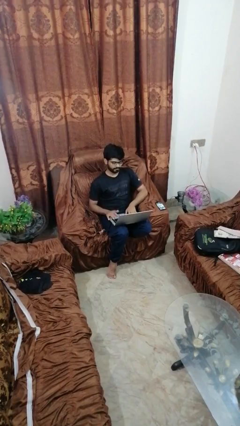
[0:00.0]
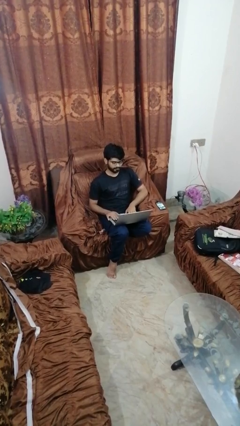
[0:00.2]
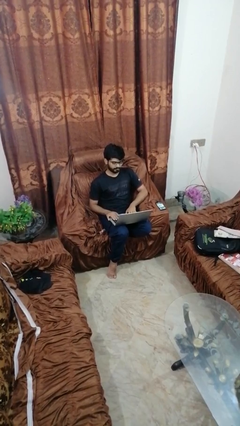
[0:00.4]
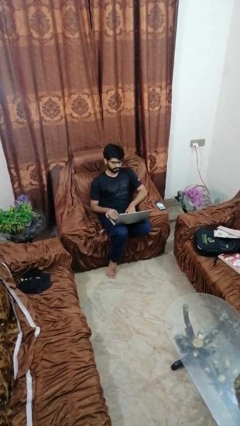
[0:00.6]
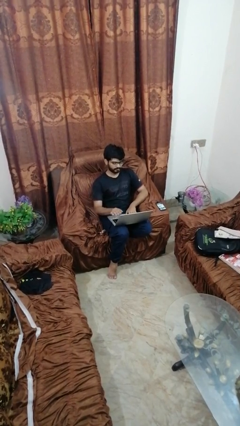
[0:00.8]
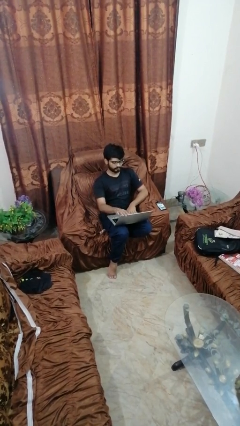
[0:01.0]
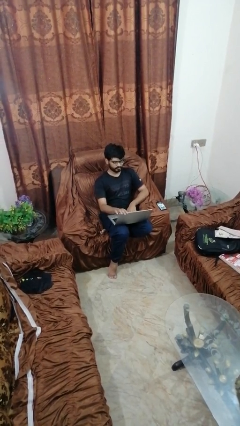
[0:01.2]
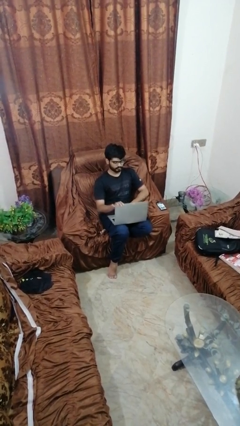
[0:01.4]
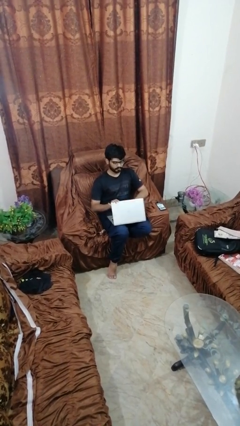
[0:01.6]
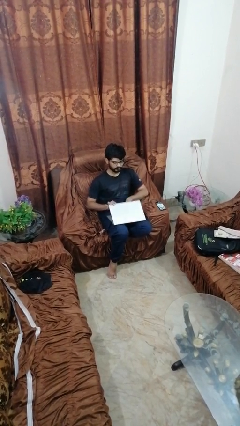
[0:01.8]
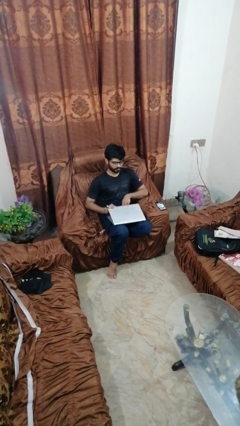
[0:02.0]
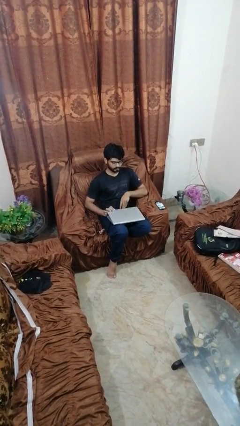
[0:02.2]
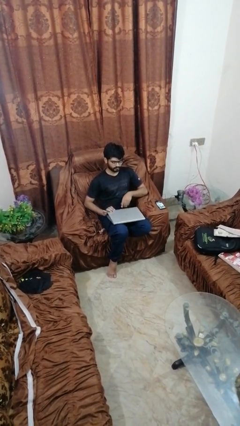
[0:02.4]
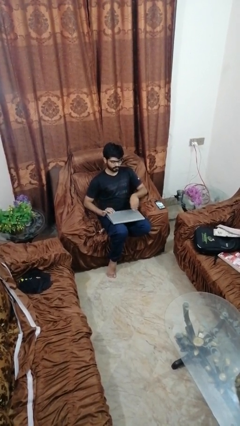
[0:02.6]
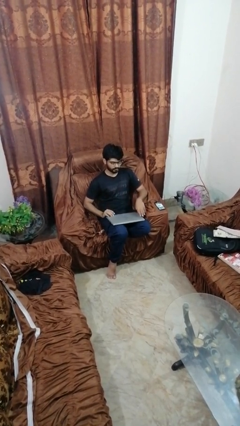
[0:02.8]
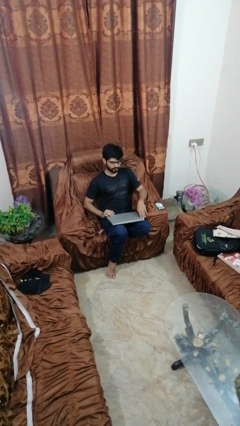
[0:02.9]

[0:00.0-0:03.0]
person closes laptop

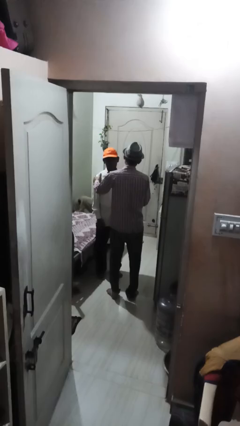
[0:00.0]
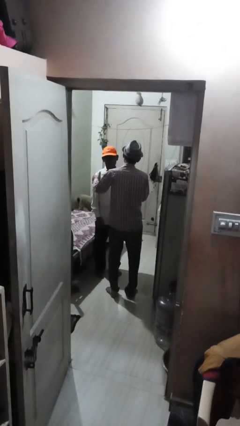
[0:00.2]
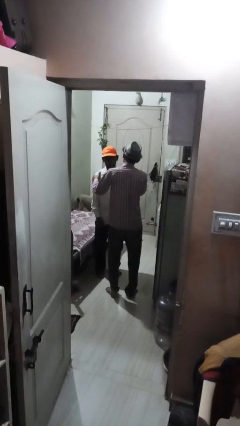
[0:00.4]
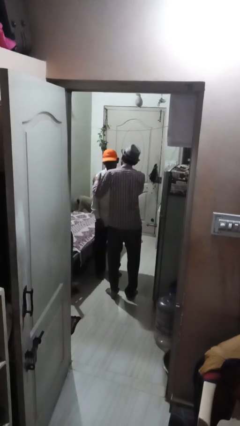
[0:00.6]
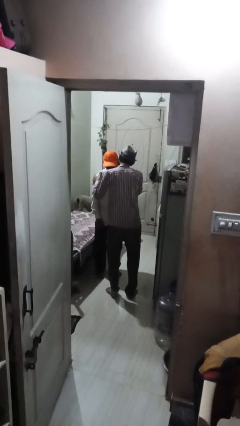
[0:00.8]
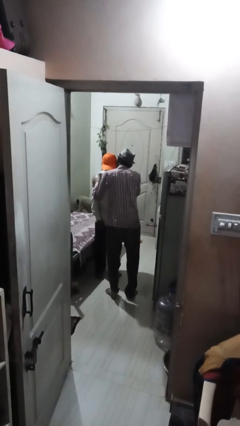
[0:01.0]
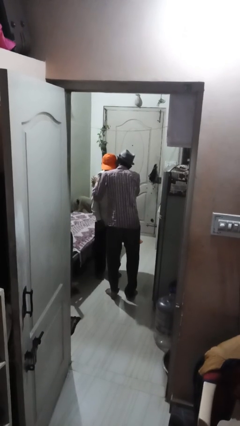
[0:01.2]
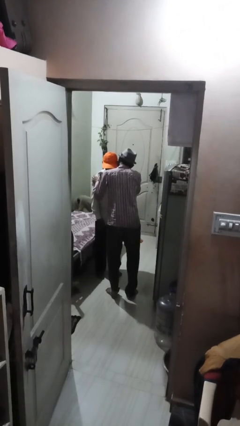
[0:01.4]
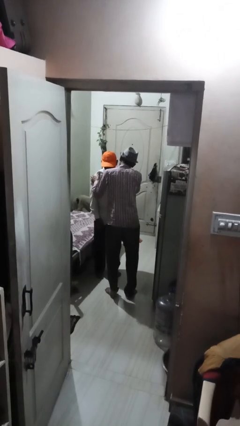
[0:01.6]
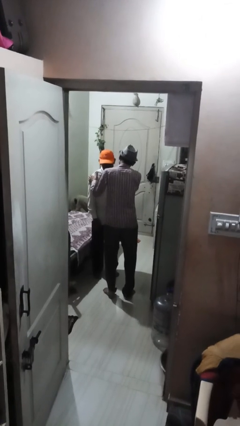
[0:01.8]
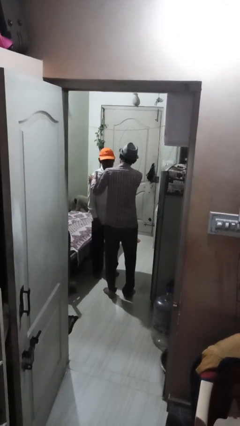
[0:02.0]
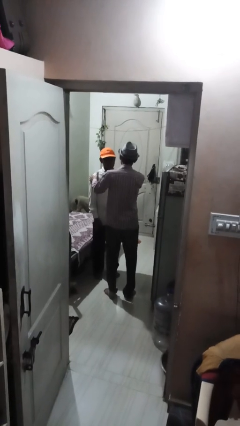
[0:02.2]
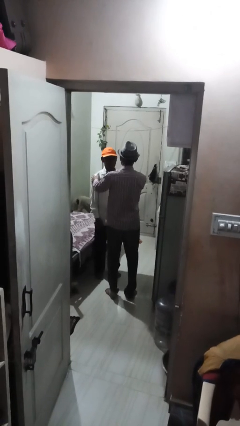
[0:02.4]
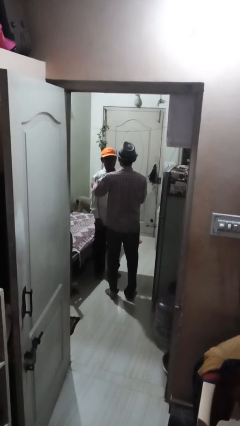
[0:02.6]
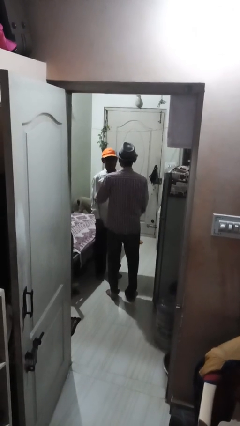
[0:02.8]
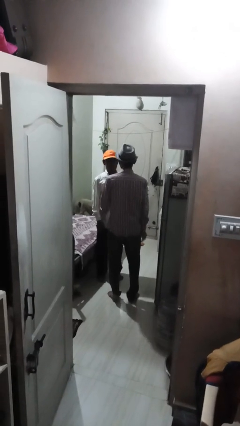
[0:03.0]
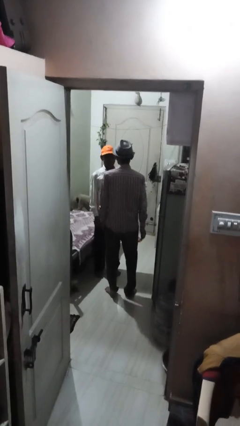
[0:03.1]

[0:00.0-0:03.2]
person kisses cheek of person

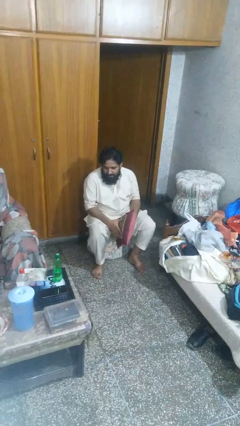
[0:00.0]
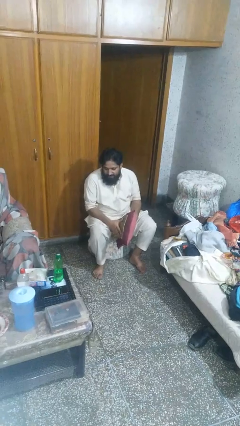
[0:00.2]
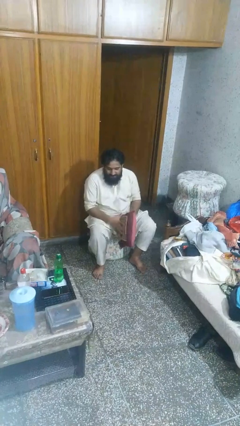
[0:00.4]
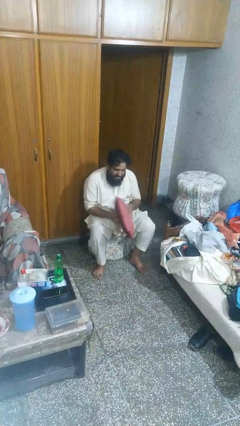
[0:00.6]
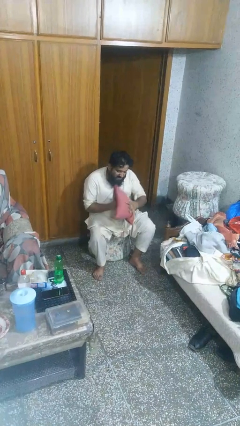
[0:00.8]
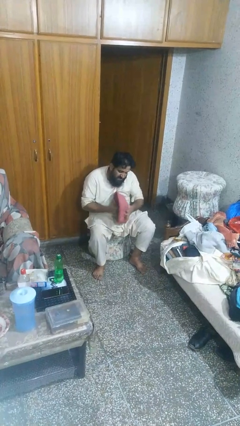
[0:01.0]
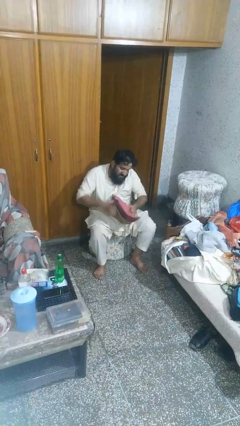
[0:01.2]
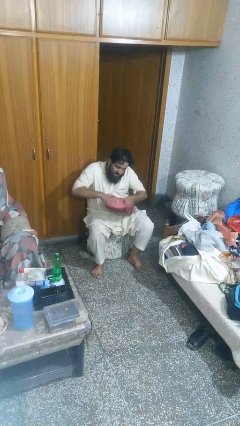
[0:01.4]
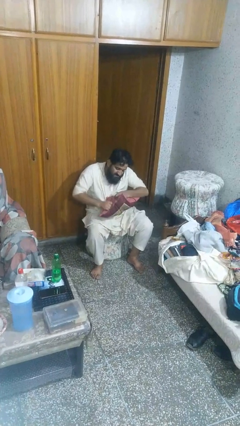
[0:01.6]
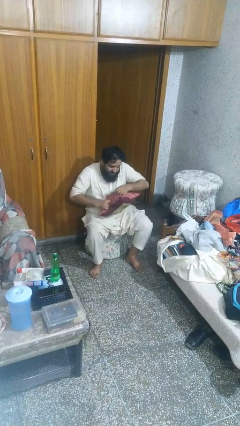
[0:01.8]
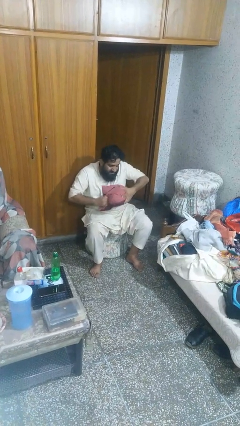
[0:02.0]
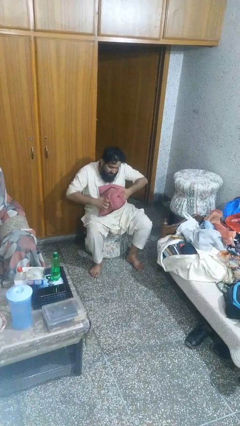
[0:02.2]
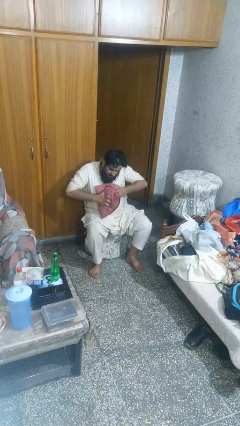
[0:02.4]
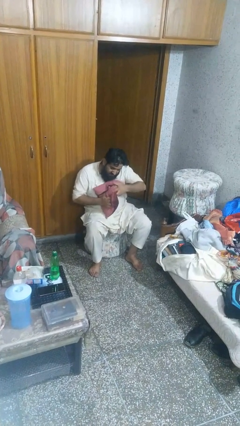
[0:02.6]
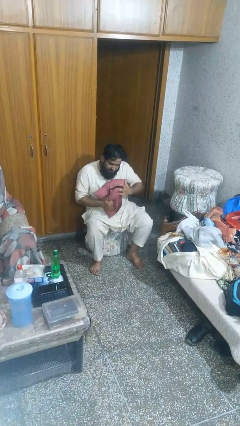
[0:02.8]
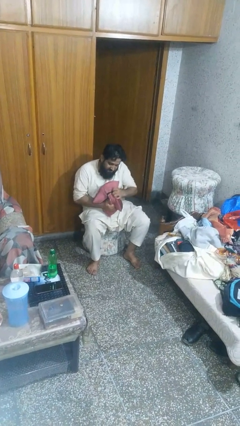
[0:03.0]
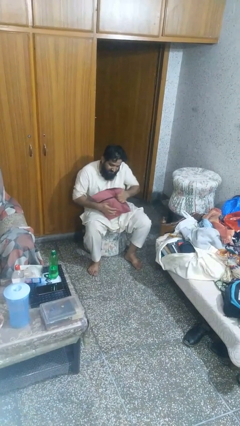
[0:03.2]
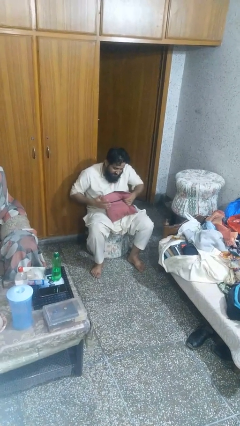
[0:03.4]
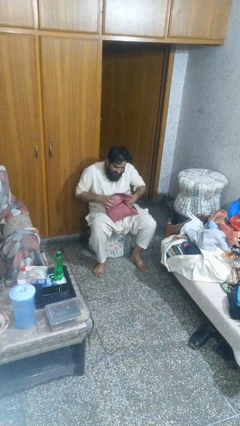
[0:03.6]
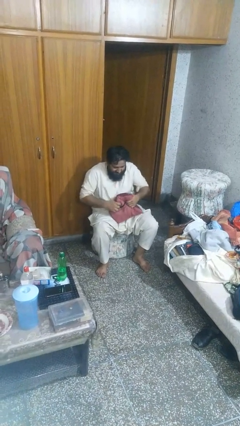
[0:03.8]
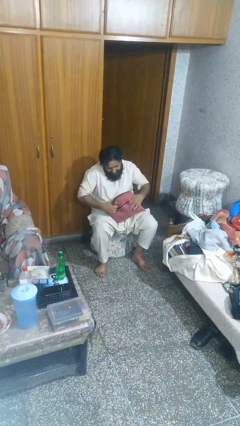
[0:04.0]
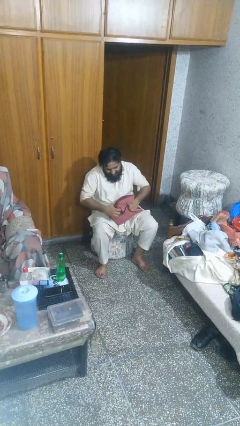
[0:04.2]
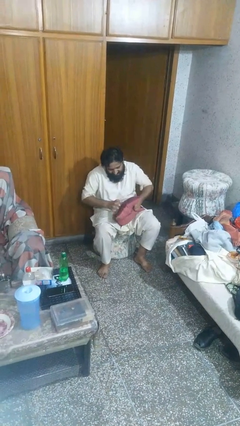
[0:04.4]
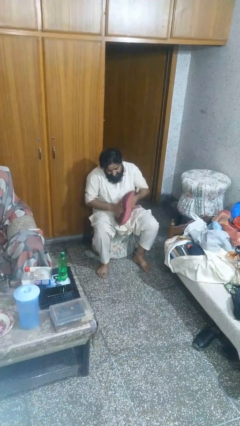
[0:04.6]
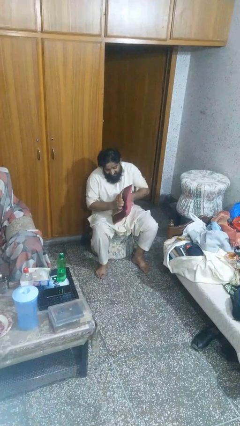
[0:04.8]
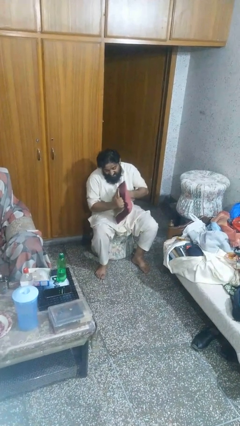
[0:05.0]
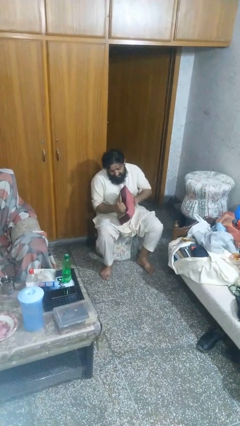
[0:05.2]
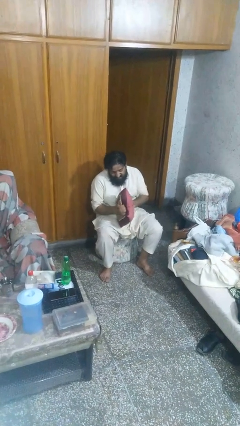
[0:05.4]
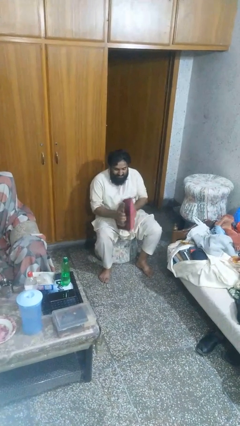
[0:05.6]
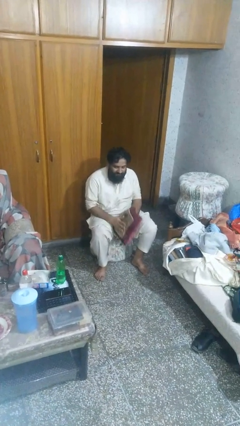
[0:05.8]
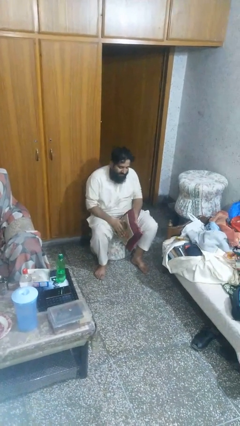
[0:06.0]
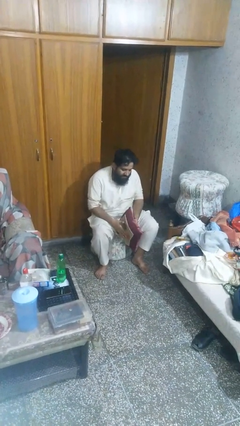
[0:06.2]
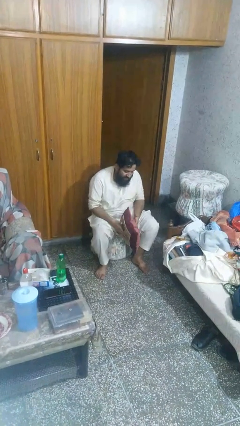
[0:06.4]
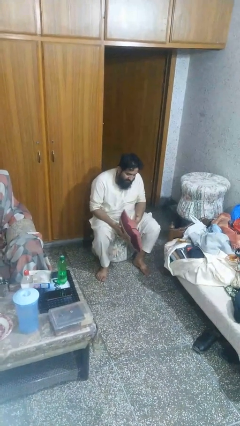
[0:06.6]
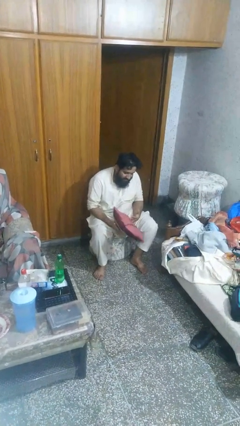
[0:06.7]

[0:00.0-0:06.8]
person squeezes object

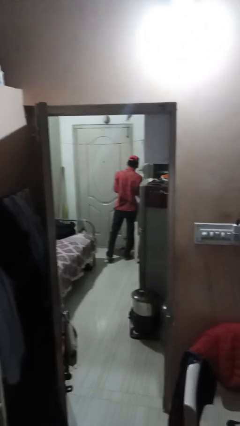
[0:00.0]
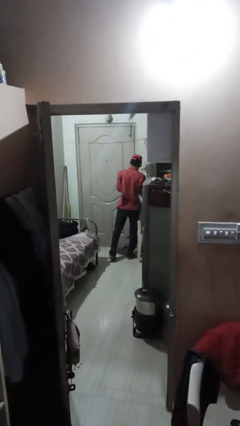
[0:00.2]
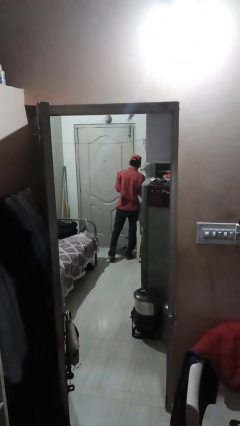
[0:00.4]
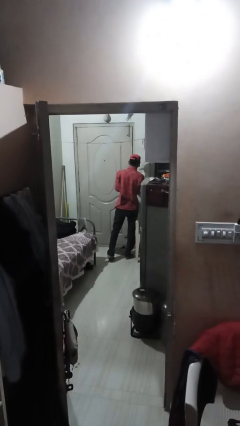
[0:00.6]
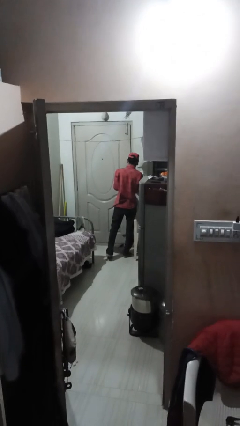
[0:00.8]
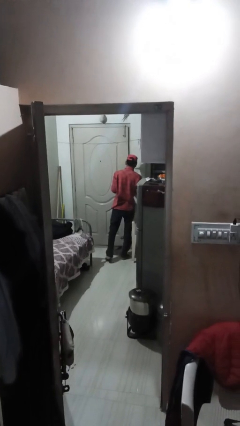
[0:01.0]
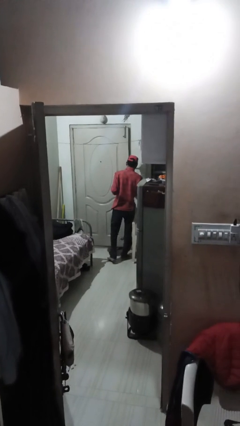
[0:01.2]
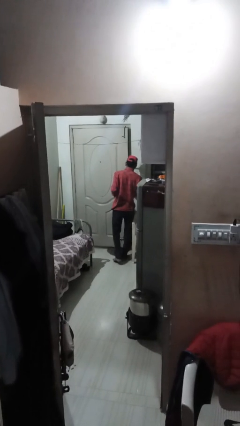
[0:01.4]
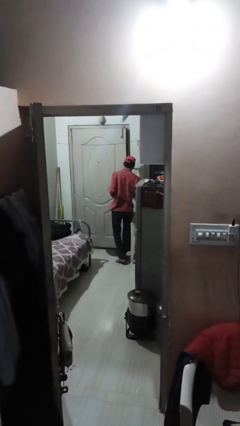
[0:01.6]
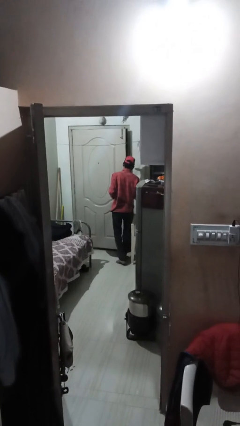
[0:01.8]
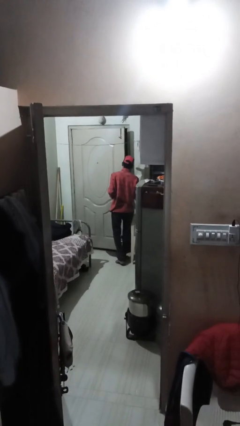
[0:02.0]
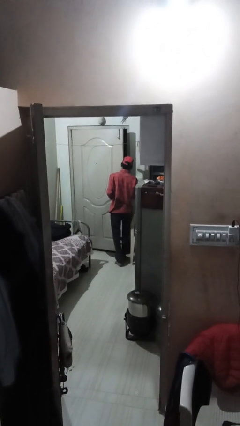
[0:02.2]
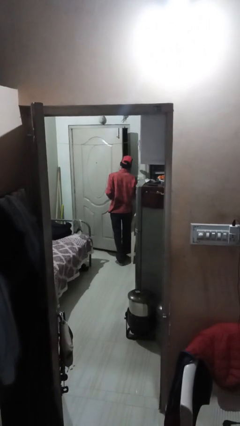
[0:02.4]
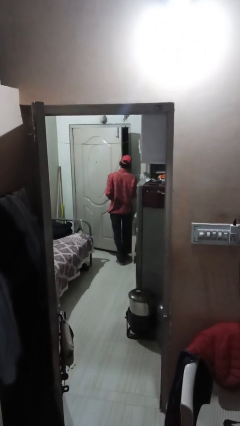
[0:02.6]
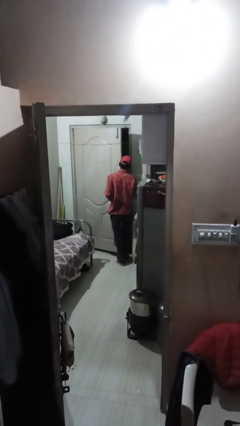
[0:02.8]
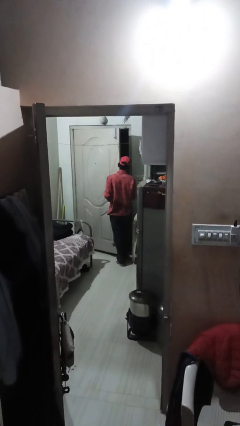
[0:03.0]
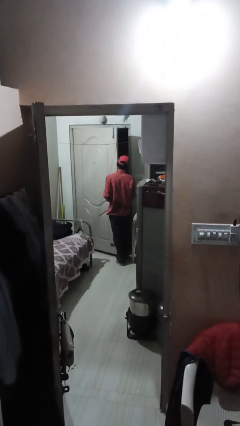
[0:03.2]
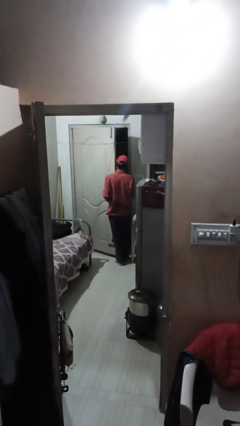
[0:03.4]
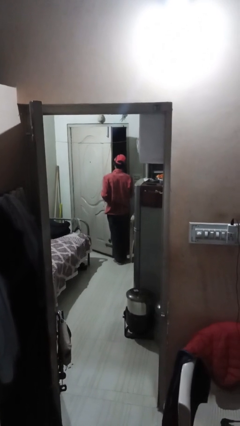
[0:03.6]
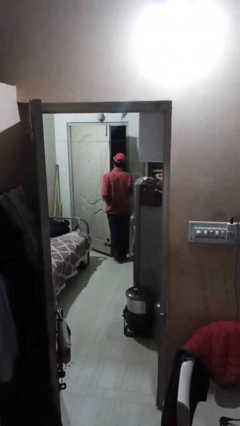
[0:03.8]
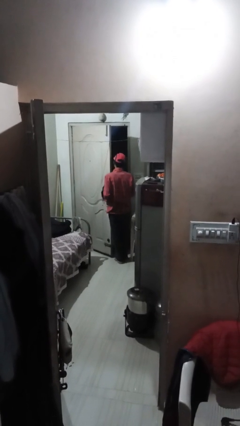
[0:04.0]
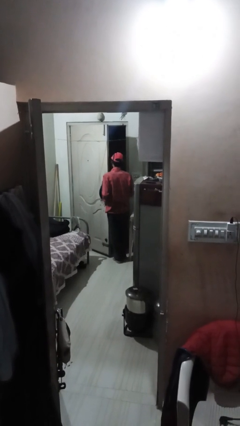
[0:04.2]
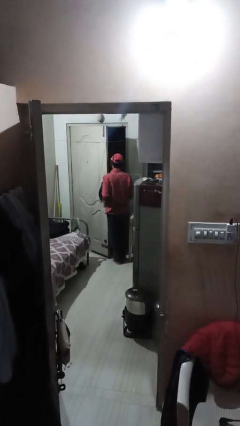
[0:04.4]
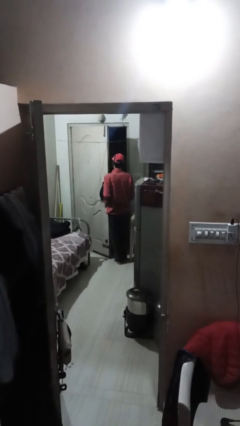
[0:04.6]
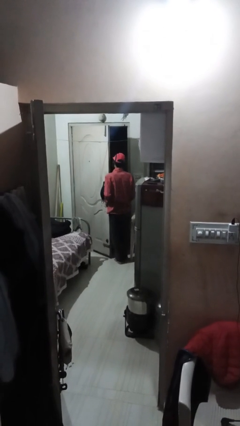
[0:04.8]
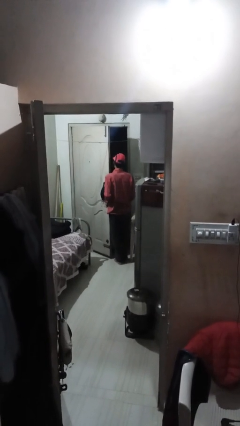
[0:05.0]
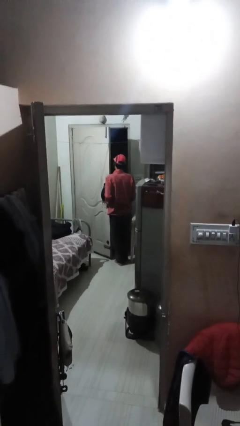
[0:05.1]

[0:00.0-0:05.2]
person opens facility door
